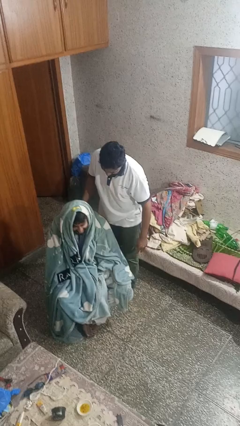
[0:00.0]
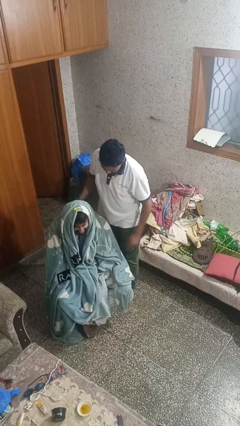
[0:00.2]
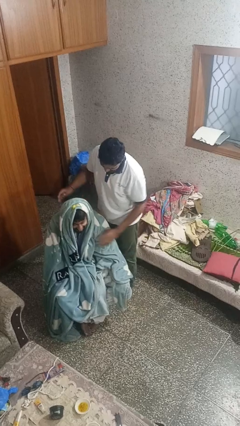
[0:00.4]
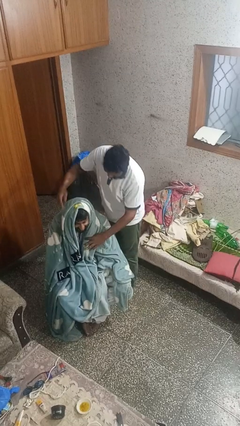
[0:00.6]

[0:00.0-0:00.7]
person uncovers friend with blanket

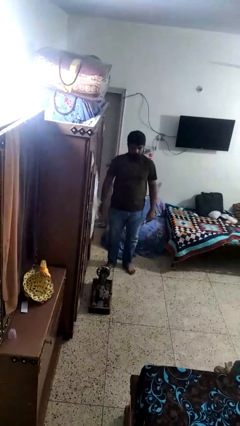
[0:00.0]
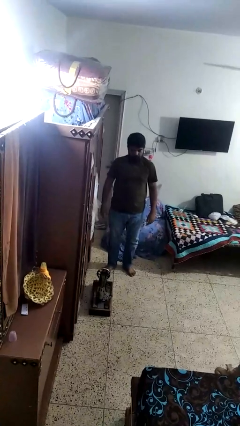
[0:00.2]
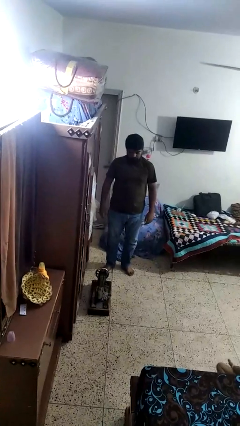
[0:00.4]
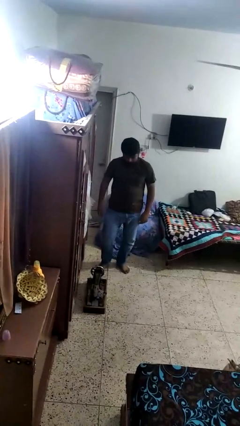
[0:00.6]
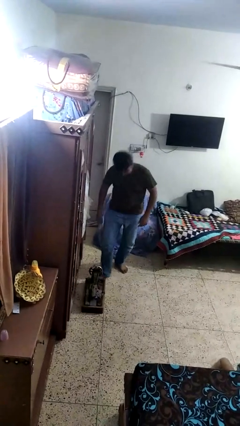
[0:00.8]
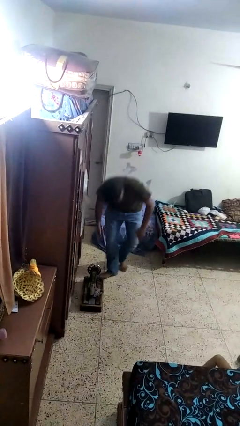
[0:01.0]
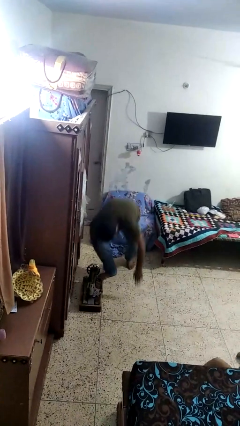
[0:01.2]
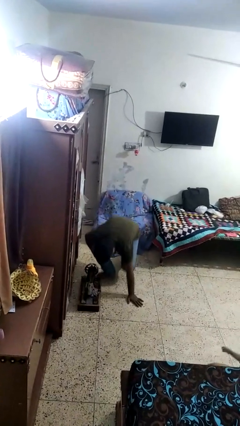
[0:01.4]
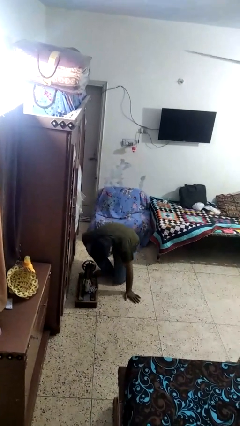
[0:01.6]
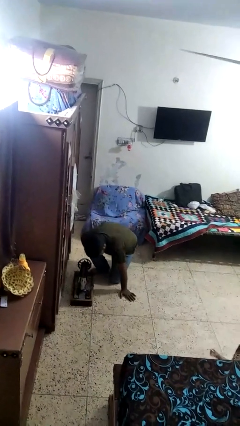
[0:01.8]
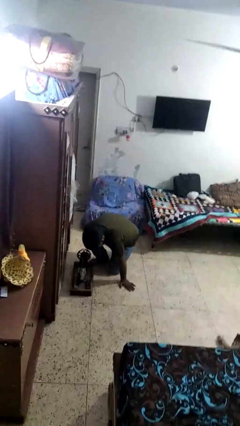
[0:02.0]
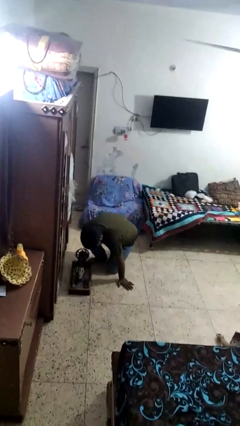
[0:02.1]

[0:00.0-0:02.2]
person trips on object on floor

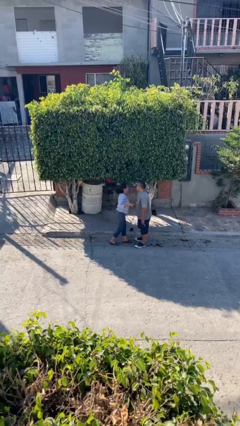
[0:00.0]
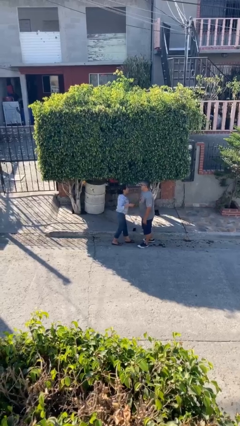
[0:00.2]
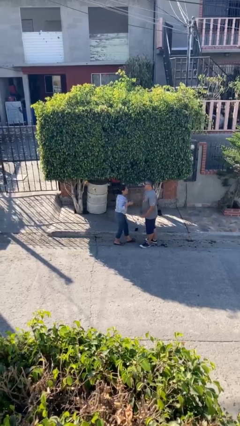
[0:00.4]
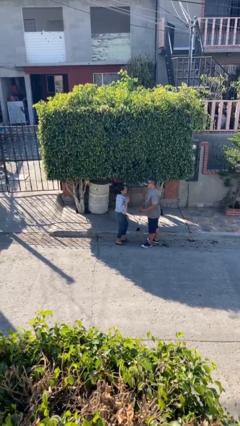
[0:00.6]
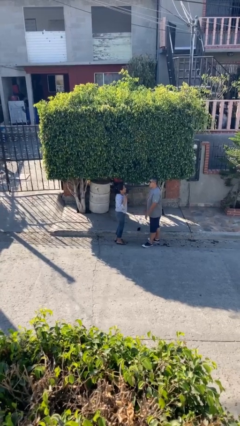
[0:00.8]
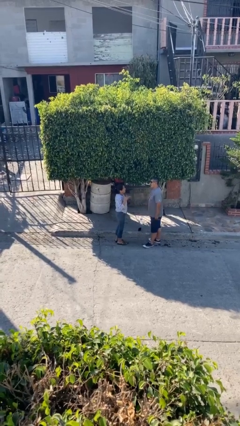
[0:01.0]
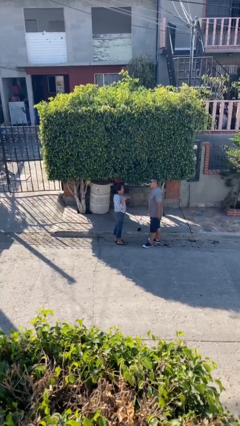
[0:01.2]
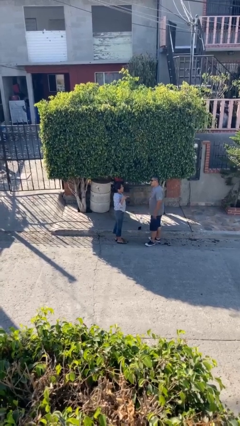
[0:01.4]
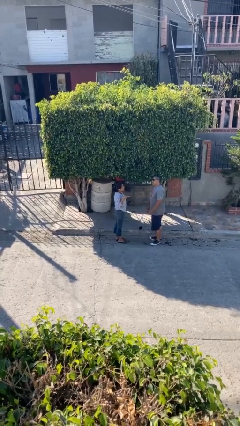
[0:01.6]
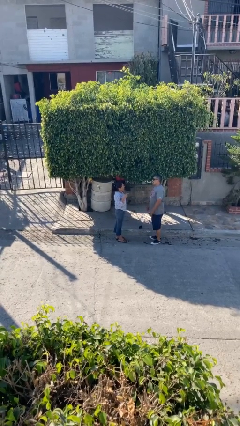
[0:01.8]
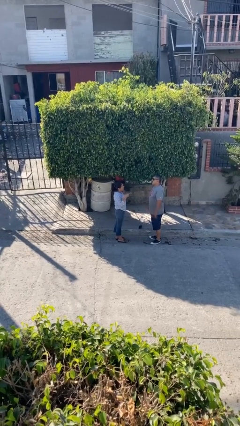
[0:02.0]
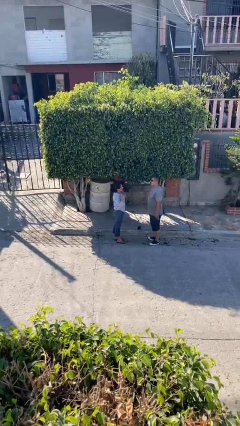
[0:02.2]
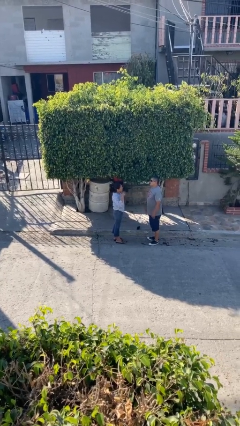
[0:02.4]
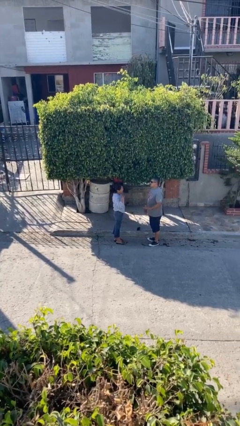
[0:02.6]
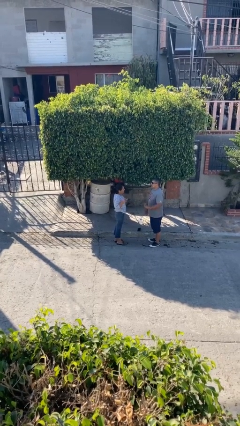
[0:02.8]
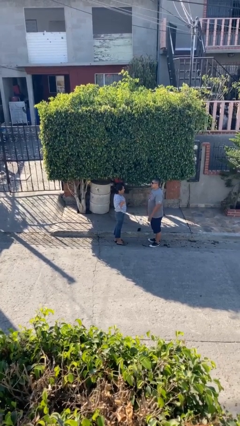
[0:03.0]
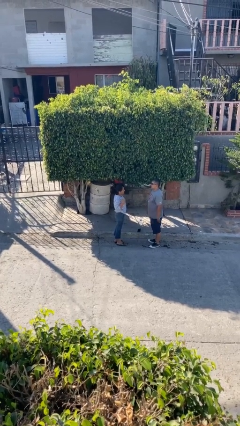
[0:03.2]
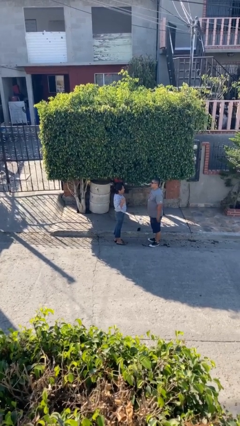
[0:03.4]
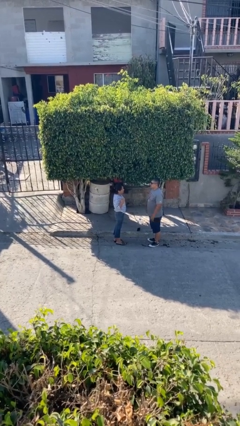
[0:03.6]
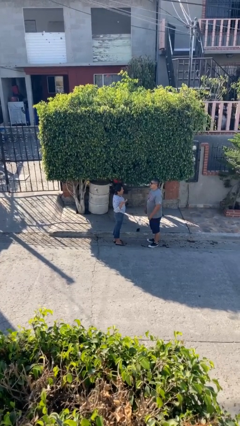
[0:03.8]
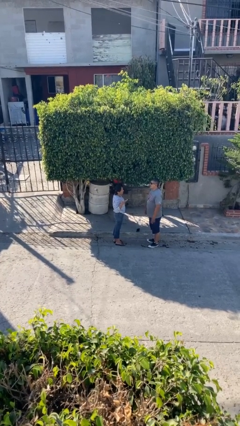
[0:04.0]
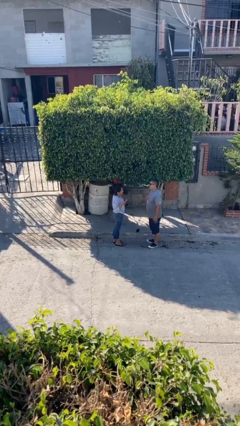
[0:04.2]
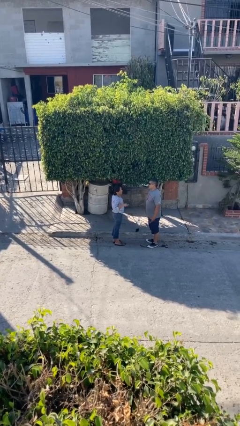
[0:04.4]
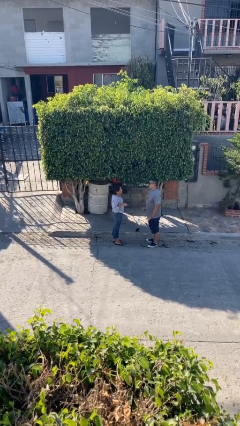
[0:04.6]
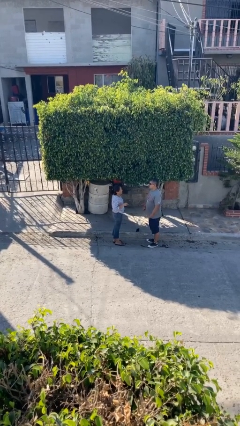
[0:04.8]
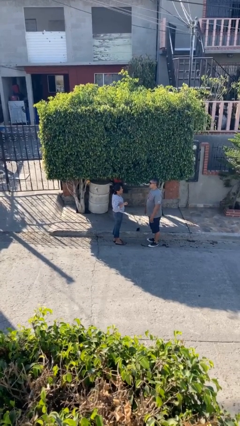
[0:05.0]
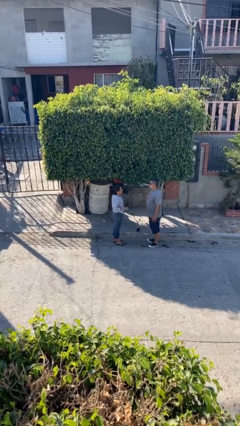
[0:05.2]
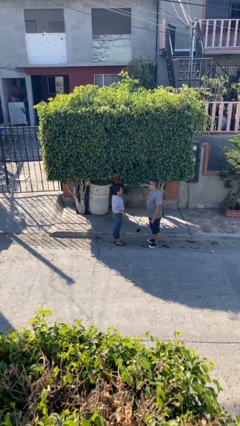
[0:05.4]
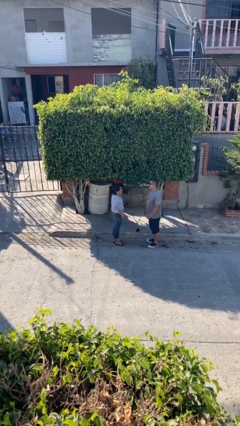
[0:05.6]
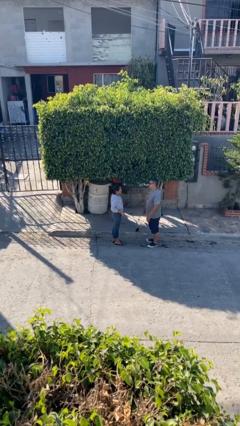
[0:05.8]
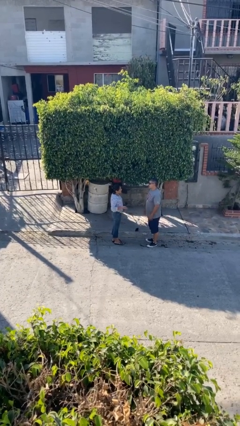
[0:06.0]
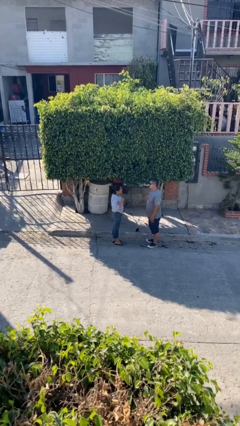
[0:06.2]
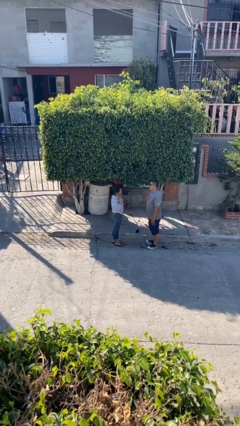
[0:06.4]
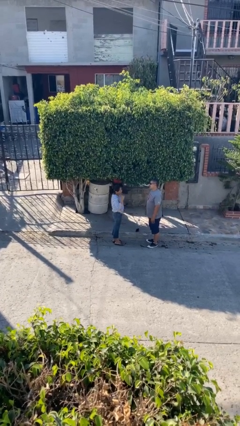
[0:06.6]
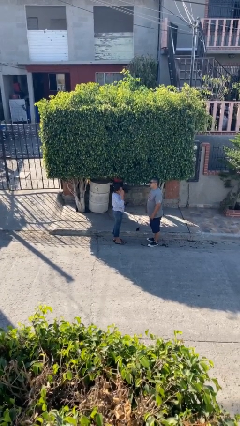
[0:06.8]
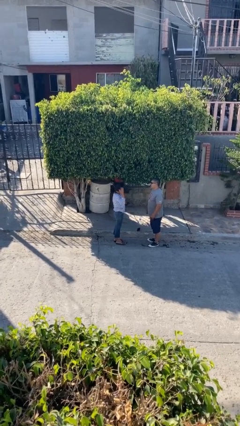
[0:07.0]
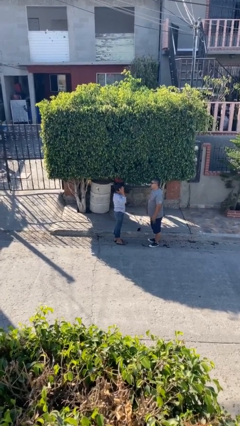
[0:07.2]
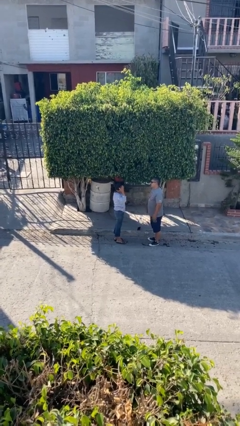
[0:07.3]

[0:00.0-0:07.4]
person talks to person

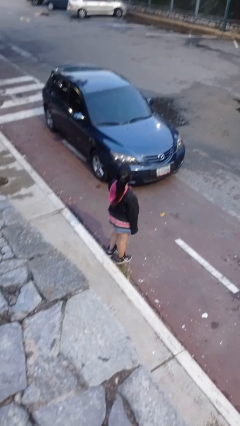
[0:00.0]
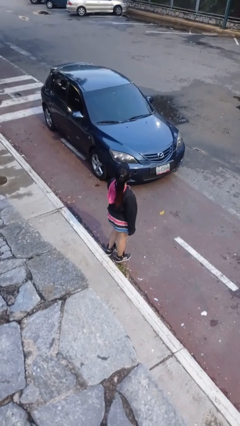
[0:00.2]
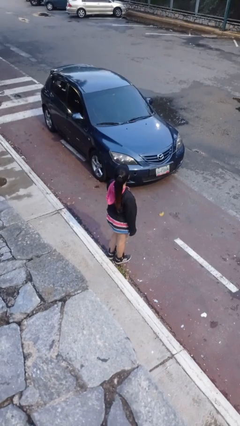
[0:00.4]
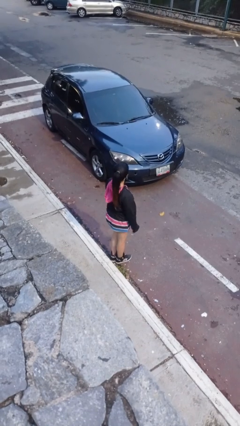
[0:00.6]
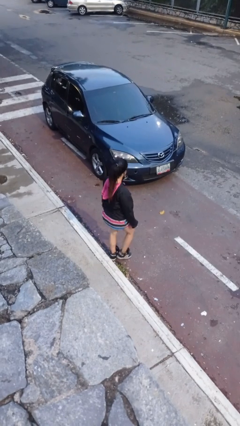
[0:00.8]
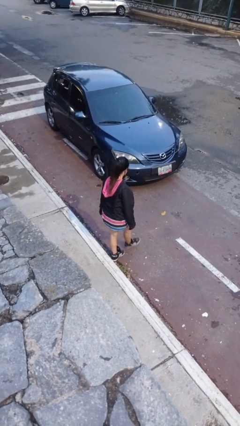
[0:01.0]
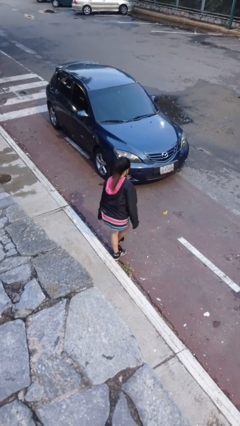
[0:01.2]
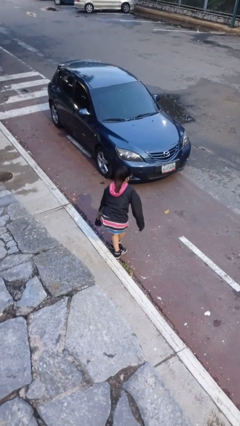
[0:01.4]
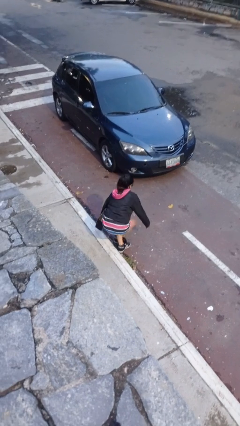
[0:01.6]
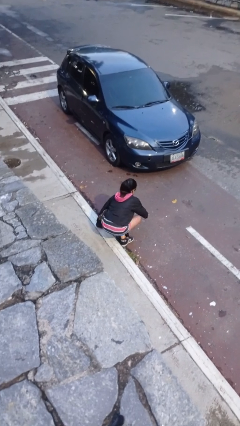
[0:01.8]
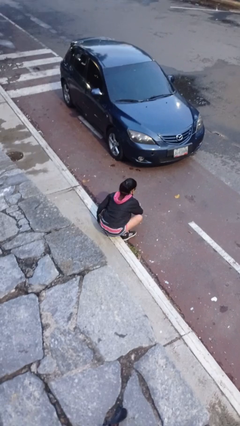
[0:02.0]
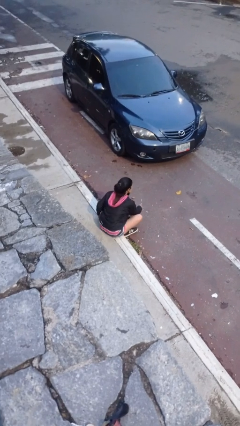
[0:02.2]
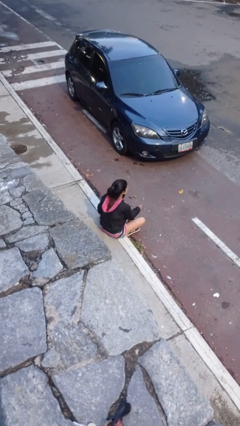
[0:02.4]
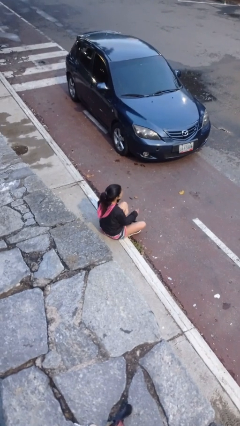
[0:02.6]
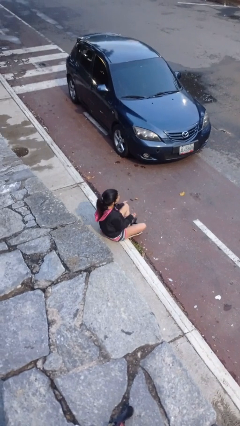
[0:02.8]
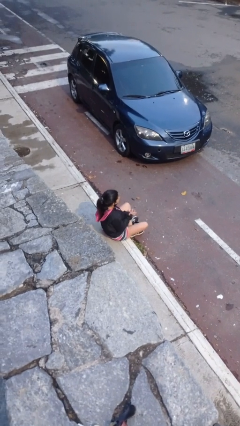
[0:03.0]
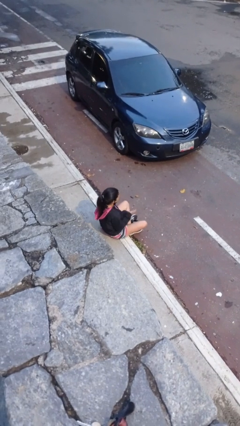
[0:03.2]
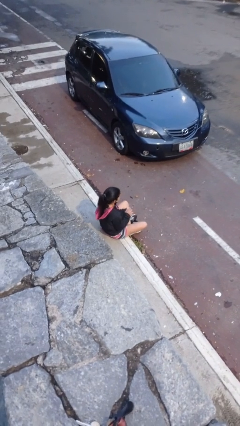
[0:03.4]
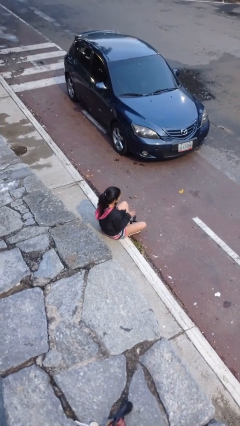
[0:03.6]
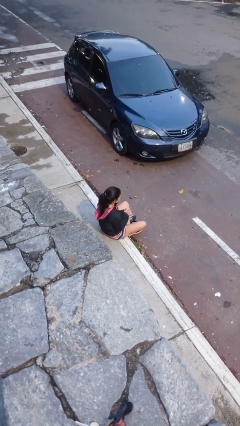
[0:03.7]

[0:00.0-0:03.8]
person sits crisscross

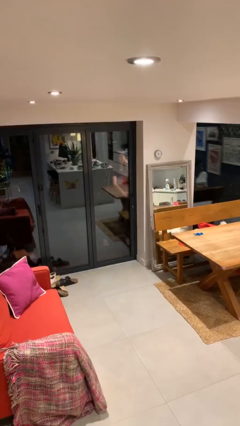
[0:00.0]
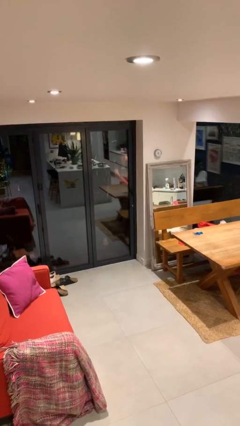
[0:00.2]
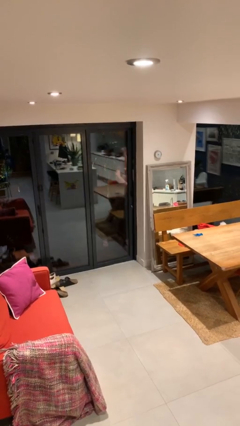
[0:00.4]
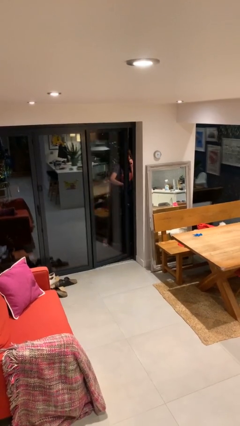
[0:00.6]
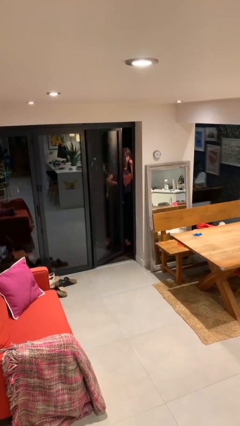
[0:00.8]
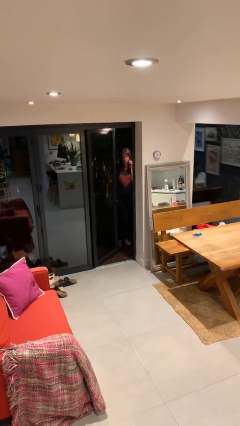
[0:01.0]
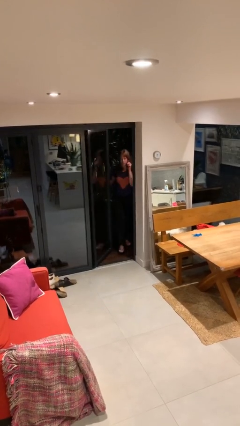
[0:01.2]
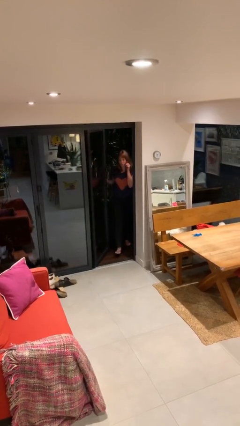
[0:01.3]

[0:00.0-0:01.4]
person opens facility door

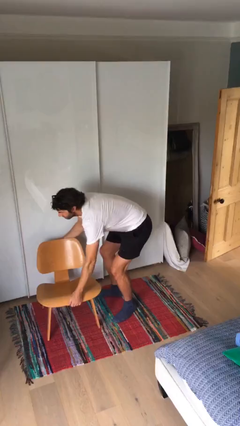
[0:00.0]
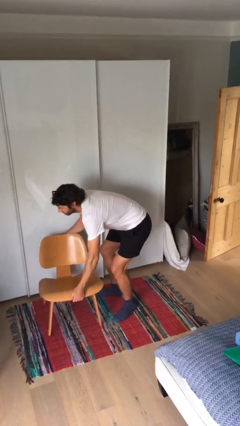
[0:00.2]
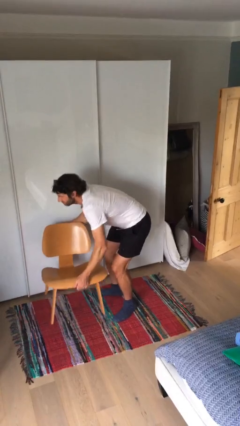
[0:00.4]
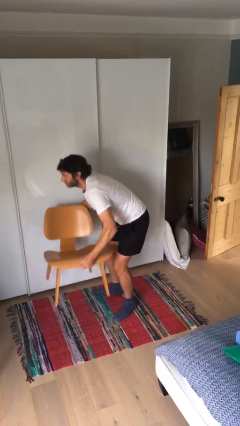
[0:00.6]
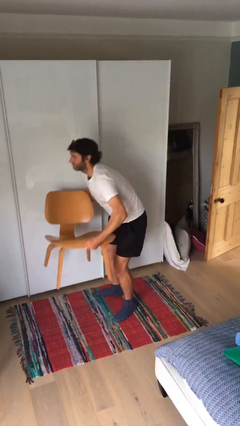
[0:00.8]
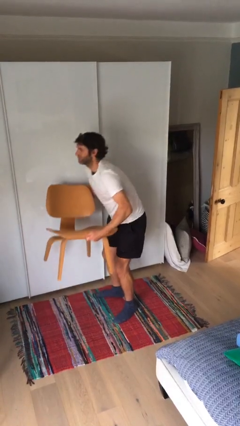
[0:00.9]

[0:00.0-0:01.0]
person picks up object from floor

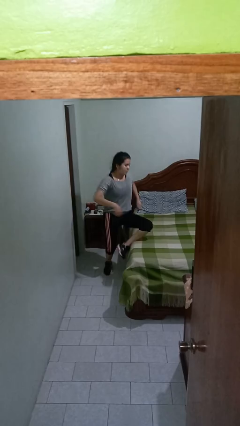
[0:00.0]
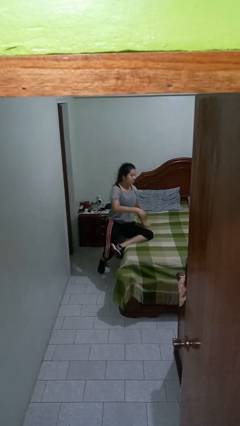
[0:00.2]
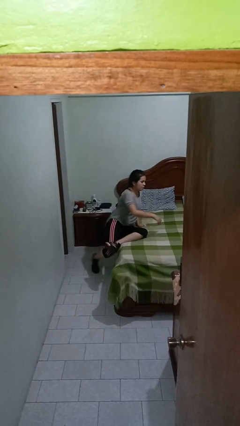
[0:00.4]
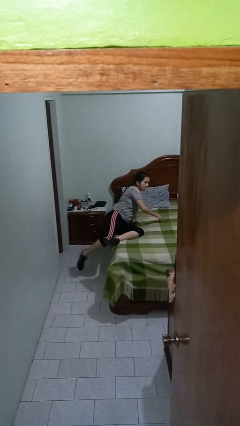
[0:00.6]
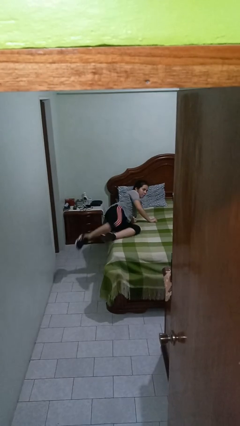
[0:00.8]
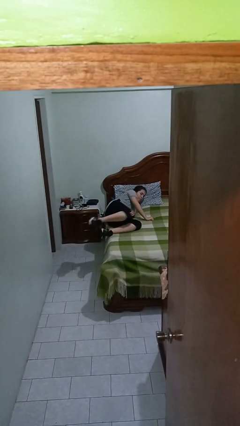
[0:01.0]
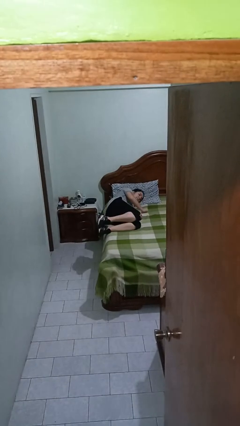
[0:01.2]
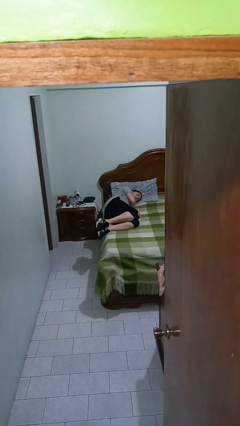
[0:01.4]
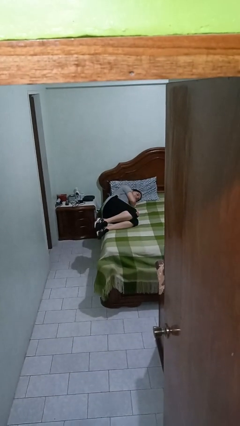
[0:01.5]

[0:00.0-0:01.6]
person lies down on bed
